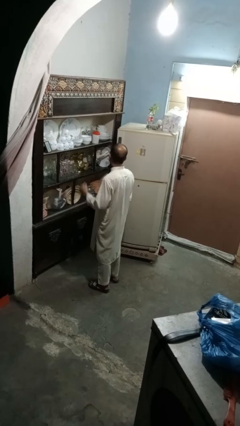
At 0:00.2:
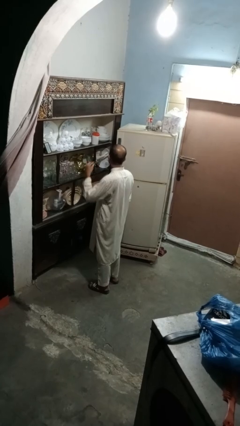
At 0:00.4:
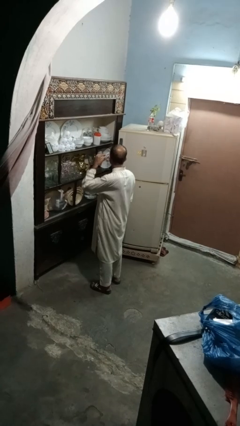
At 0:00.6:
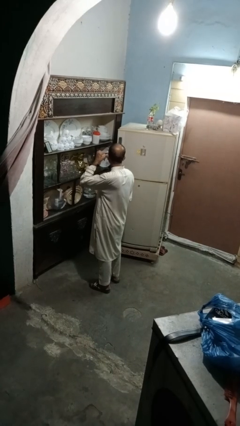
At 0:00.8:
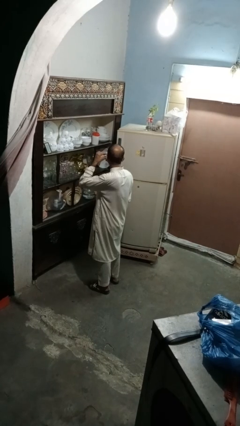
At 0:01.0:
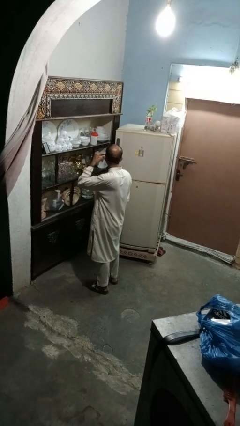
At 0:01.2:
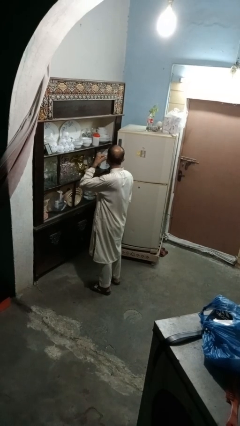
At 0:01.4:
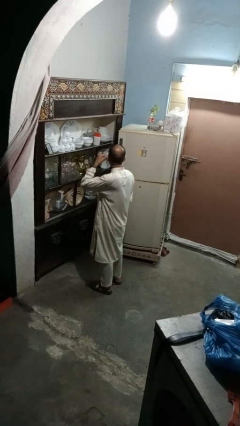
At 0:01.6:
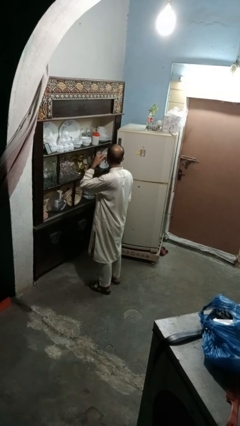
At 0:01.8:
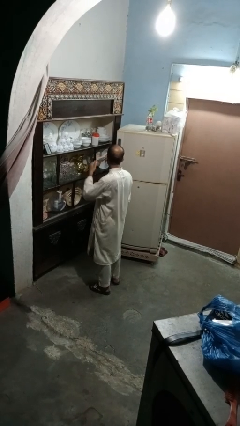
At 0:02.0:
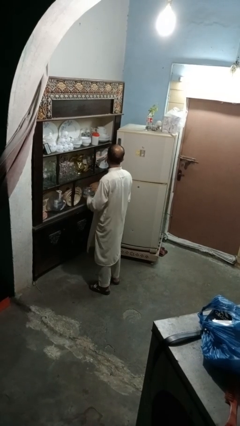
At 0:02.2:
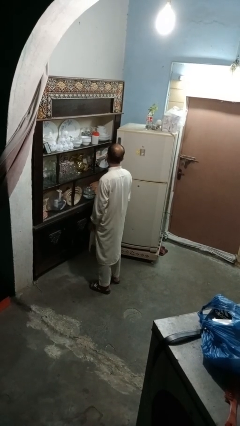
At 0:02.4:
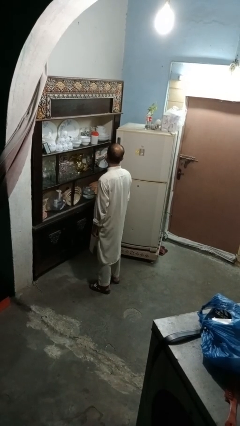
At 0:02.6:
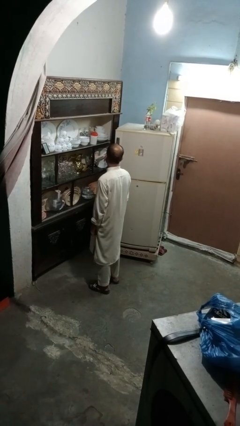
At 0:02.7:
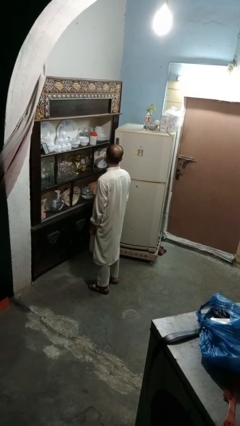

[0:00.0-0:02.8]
person puts on earrings

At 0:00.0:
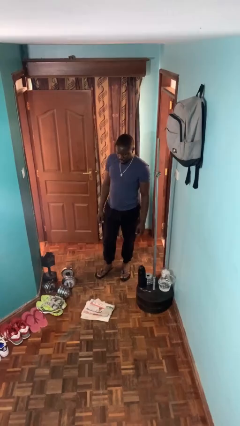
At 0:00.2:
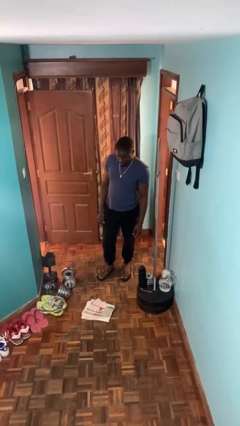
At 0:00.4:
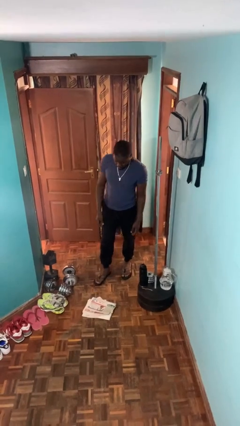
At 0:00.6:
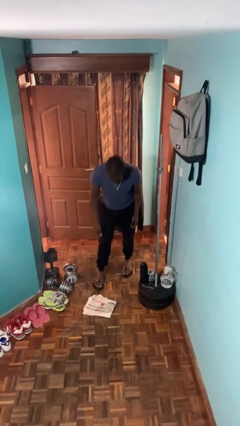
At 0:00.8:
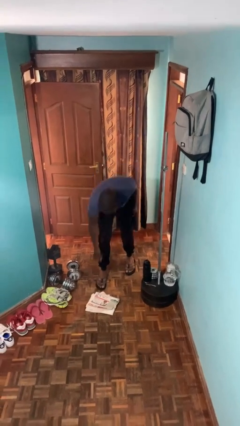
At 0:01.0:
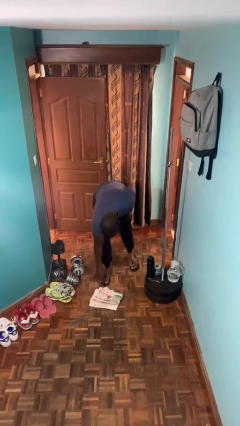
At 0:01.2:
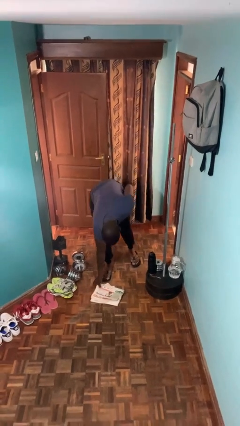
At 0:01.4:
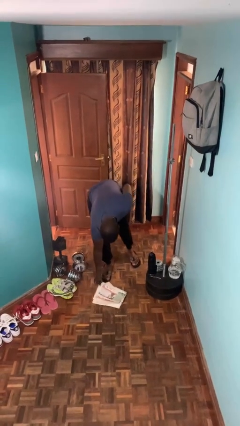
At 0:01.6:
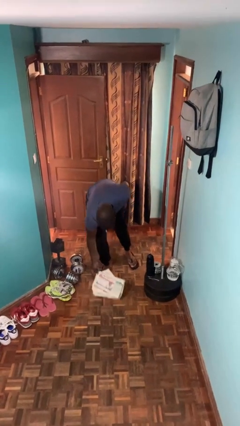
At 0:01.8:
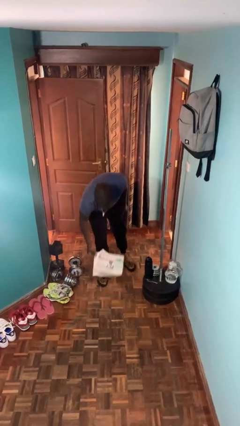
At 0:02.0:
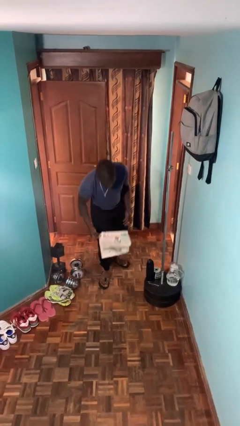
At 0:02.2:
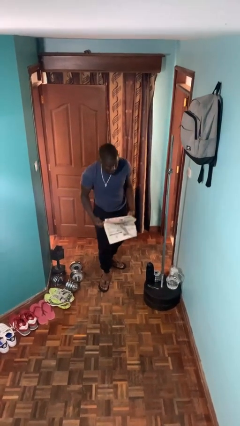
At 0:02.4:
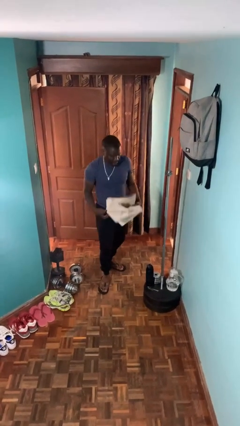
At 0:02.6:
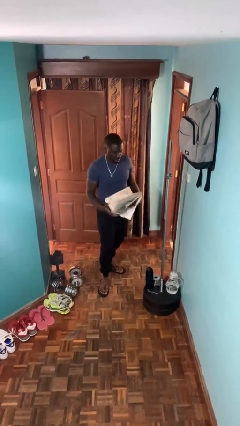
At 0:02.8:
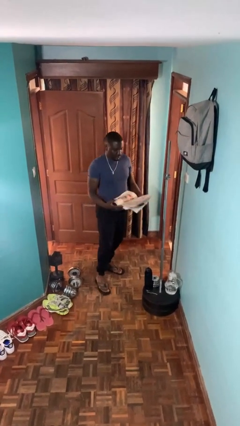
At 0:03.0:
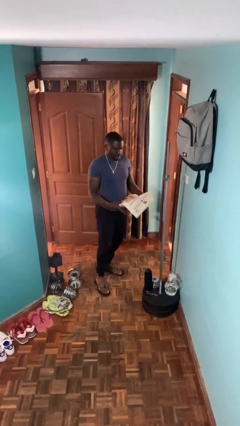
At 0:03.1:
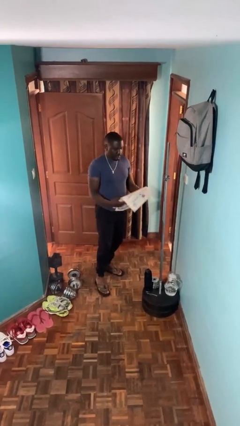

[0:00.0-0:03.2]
person picks up object from floor

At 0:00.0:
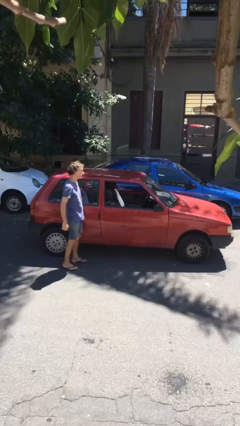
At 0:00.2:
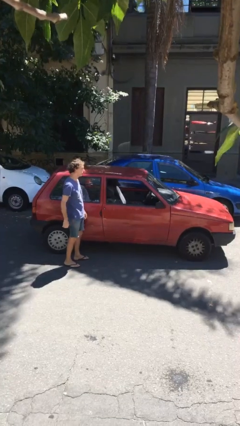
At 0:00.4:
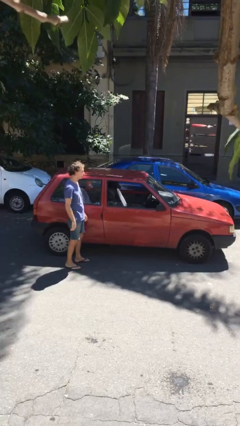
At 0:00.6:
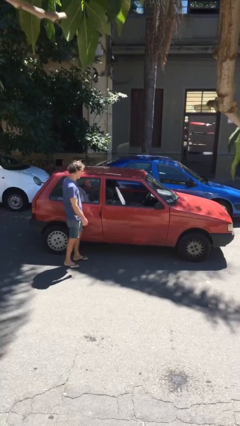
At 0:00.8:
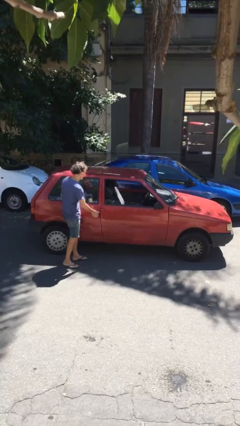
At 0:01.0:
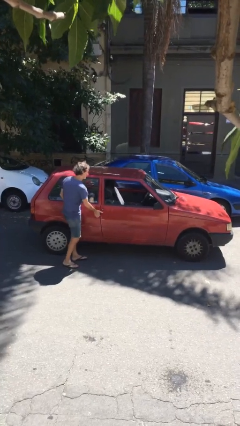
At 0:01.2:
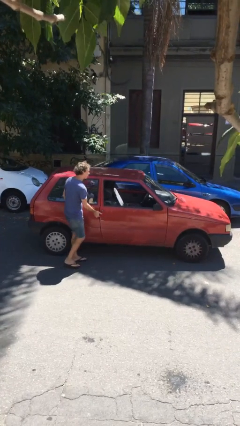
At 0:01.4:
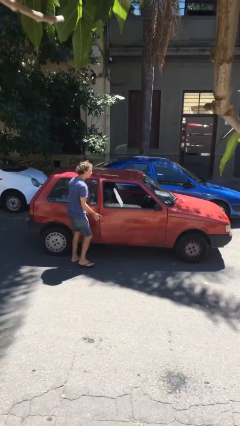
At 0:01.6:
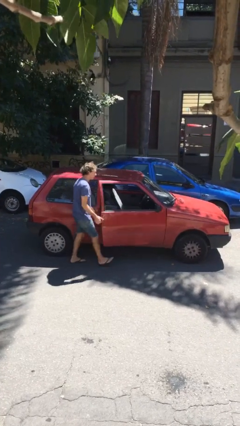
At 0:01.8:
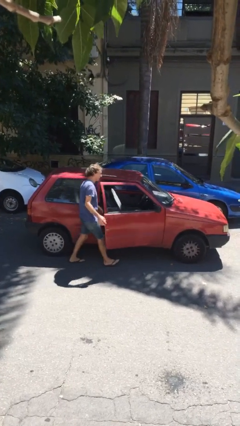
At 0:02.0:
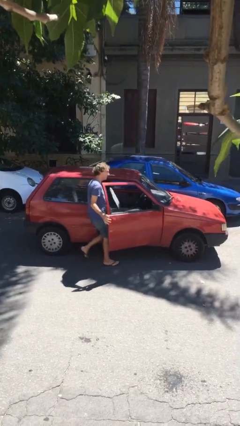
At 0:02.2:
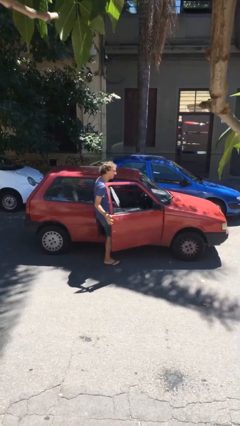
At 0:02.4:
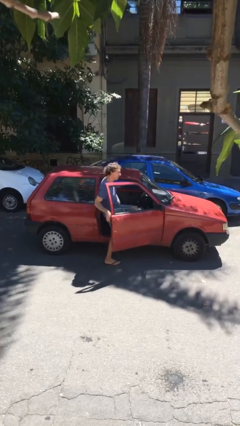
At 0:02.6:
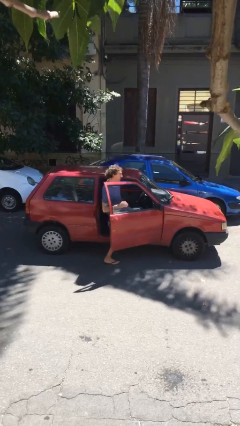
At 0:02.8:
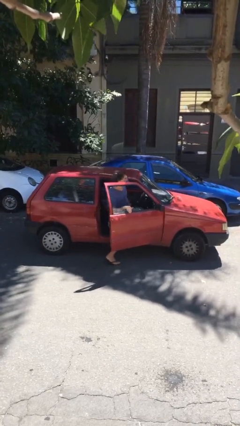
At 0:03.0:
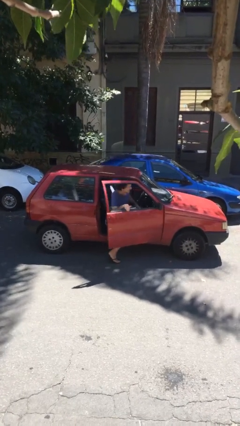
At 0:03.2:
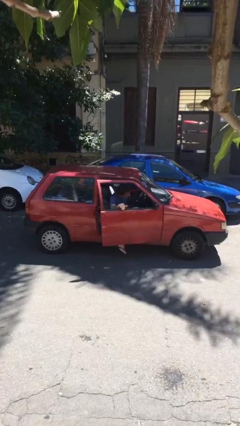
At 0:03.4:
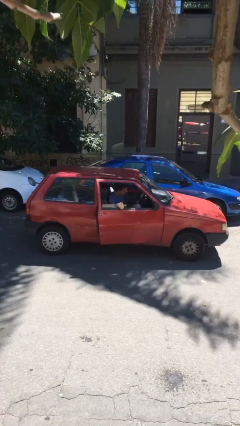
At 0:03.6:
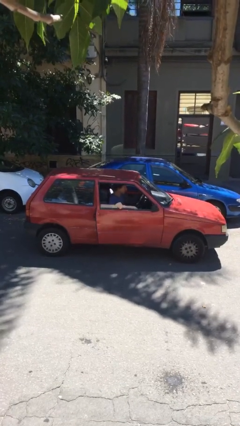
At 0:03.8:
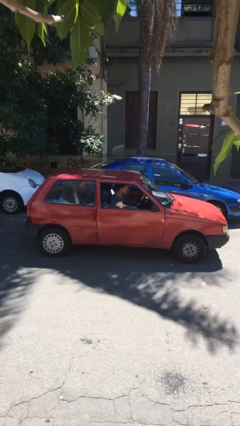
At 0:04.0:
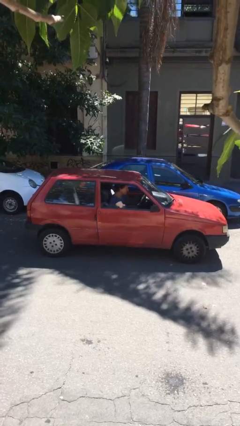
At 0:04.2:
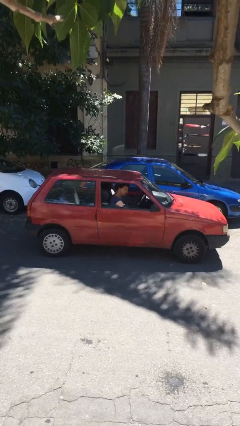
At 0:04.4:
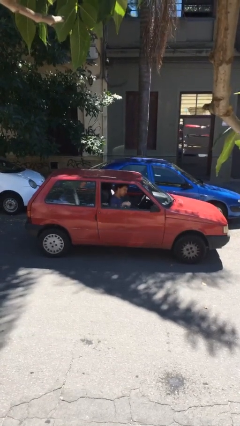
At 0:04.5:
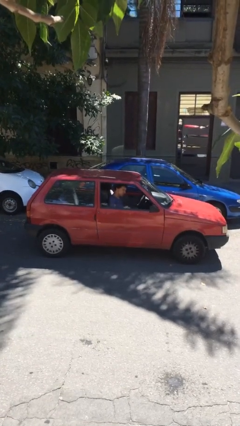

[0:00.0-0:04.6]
car picks up person

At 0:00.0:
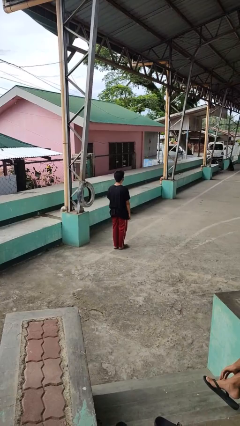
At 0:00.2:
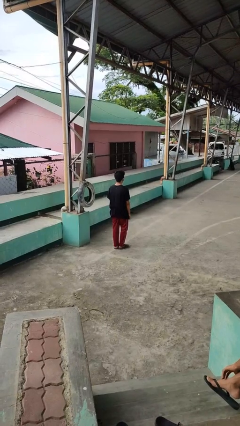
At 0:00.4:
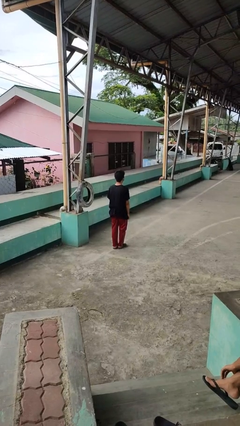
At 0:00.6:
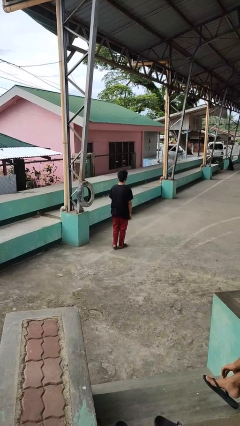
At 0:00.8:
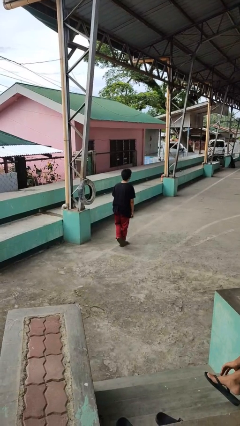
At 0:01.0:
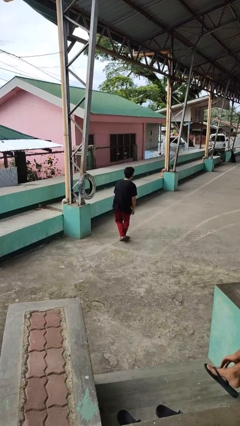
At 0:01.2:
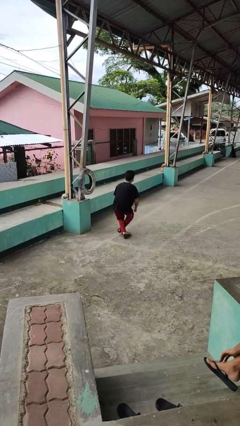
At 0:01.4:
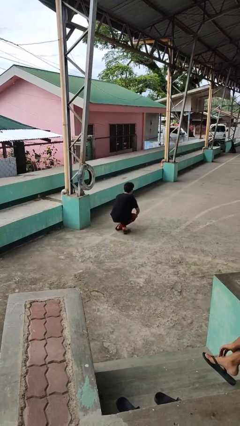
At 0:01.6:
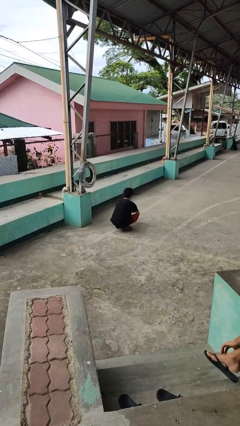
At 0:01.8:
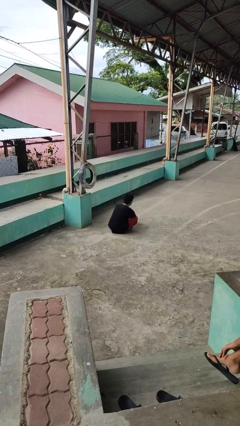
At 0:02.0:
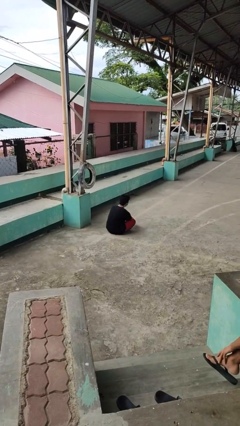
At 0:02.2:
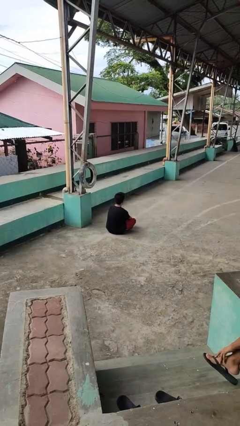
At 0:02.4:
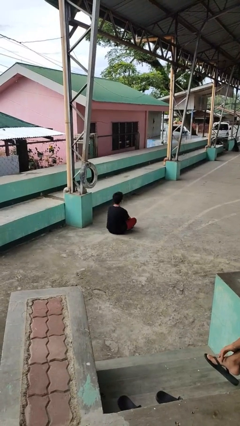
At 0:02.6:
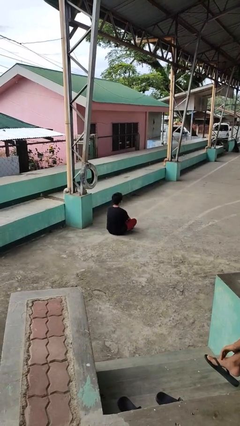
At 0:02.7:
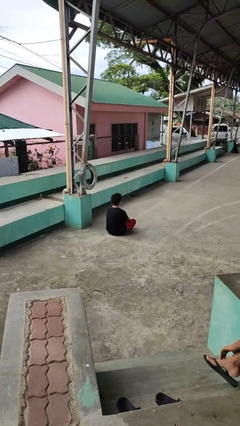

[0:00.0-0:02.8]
person sits crisscross

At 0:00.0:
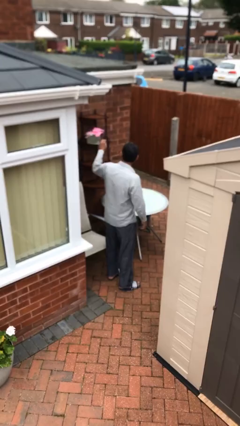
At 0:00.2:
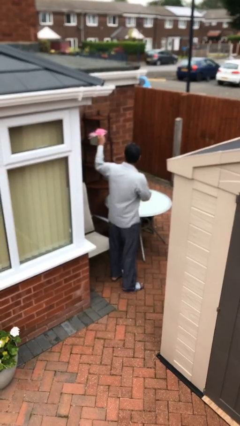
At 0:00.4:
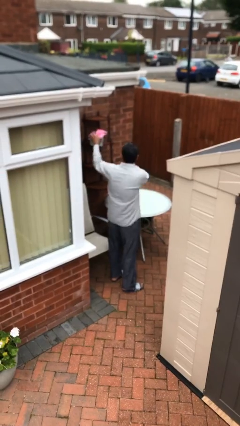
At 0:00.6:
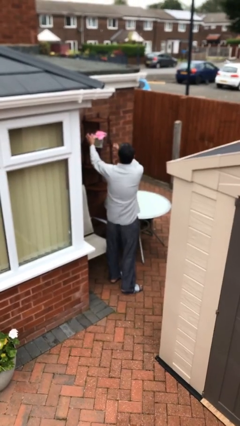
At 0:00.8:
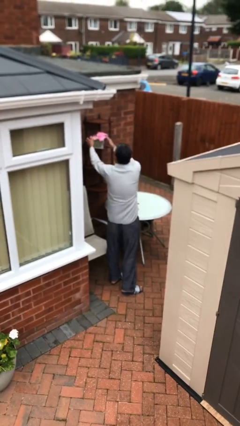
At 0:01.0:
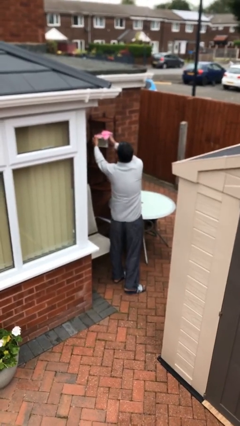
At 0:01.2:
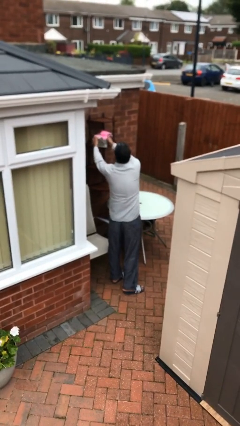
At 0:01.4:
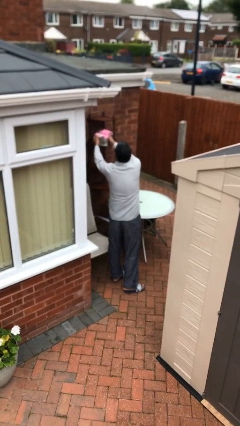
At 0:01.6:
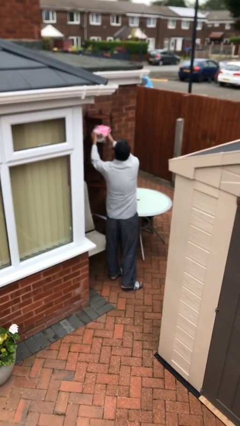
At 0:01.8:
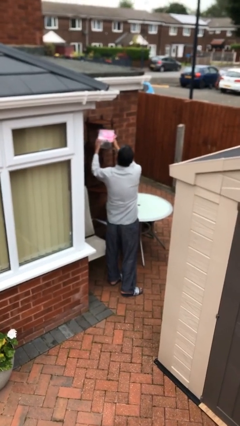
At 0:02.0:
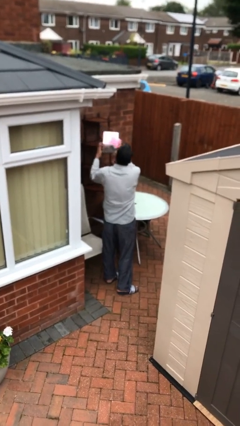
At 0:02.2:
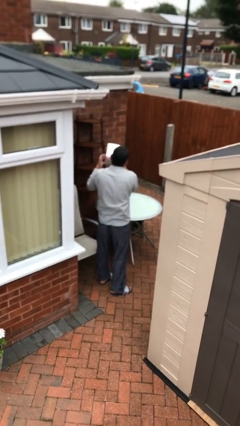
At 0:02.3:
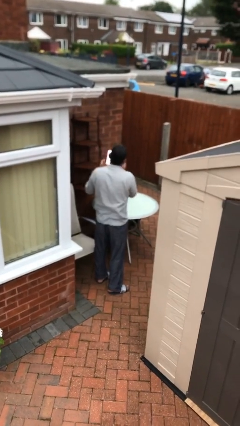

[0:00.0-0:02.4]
person picks up object from shelf

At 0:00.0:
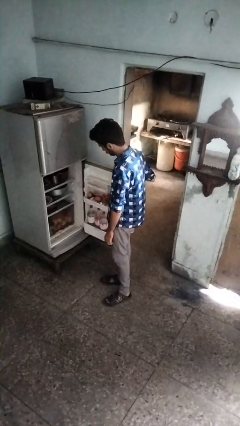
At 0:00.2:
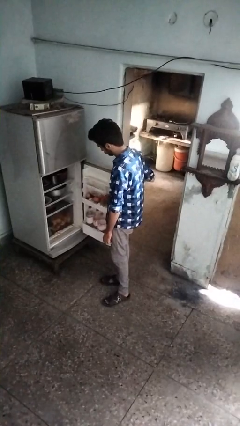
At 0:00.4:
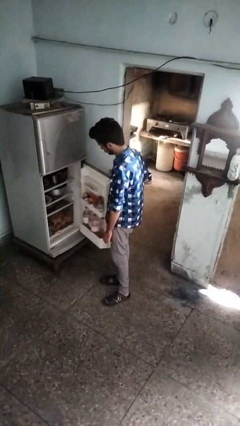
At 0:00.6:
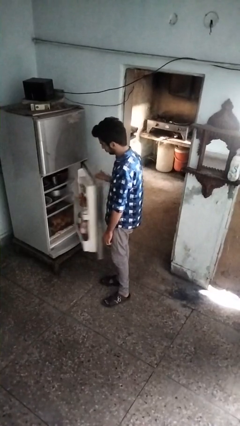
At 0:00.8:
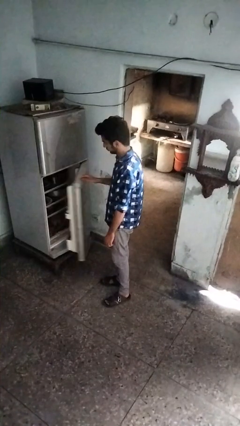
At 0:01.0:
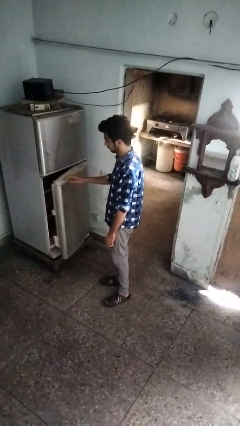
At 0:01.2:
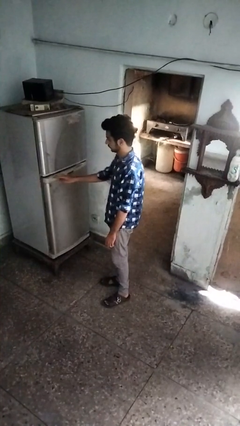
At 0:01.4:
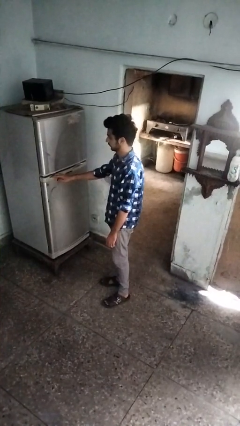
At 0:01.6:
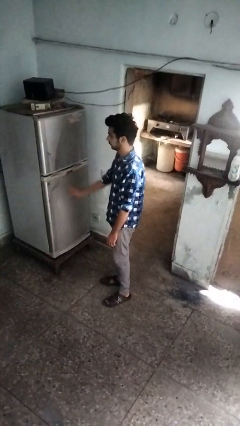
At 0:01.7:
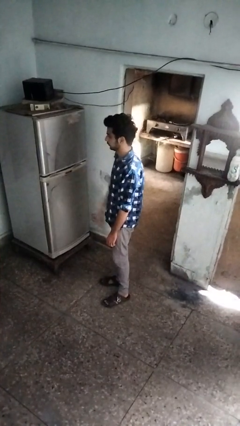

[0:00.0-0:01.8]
person closes refrigerator
